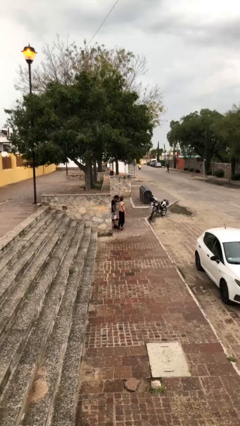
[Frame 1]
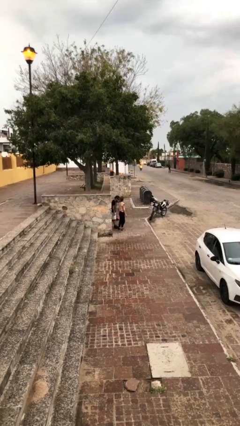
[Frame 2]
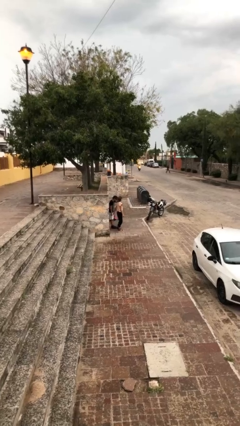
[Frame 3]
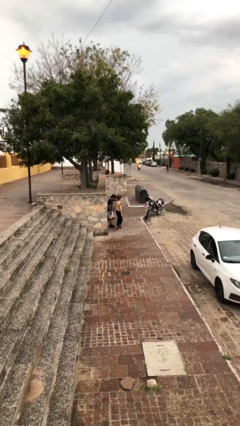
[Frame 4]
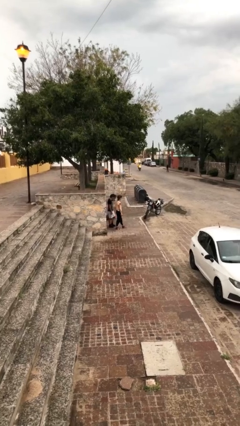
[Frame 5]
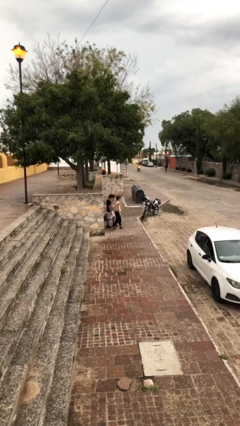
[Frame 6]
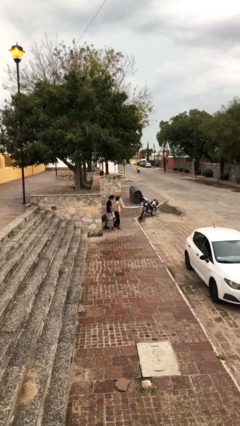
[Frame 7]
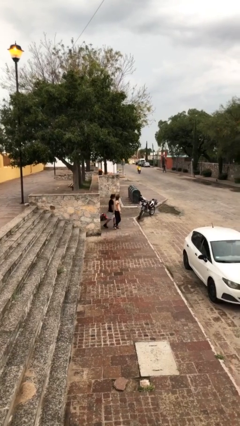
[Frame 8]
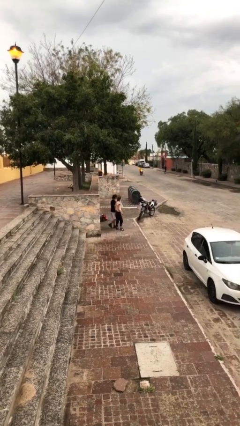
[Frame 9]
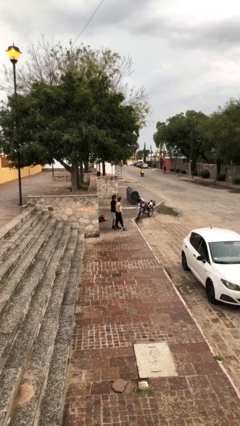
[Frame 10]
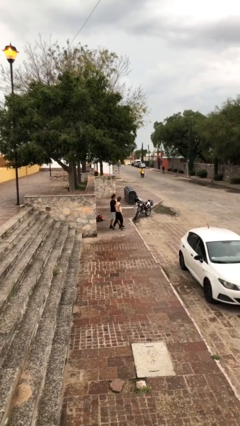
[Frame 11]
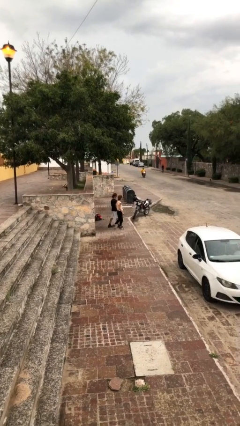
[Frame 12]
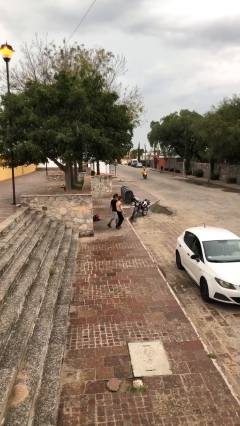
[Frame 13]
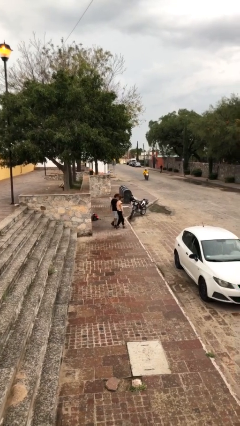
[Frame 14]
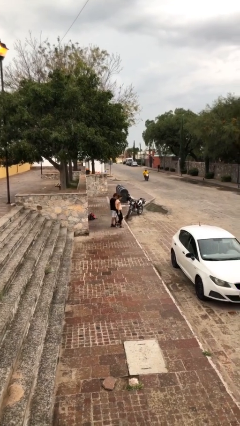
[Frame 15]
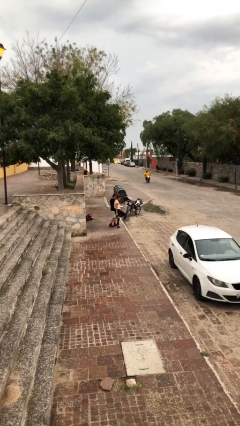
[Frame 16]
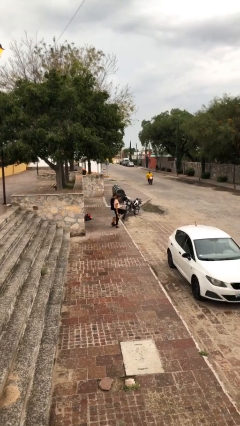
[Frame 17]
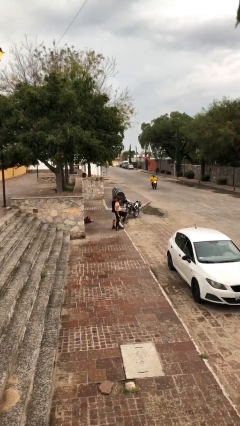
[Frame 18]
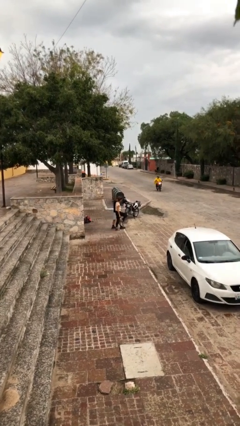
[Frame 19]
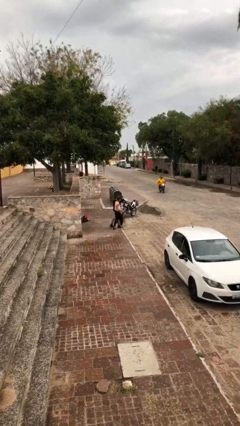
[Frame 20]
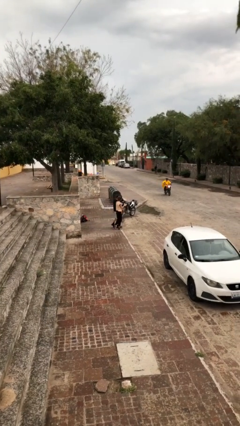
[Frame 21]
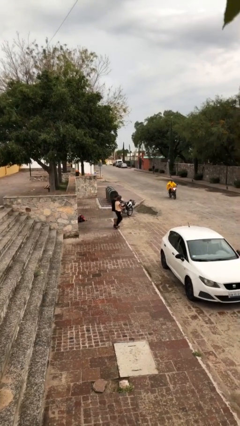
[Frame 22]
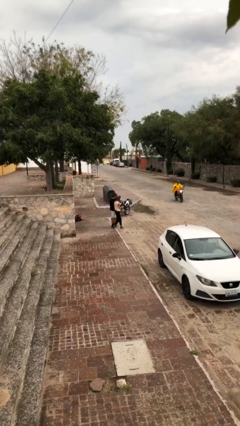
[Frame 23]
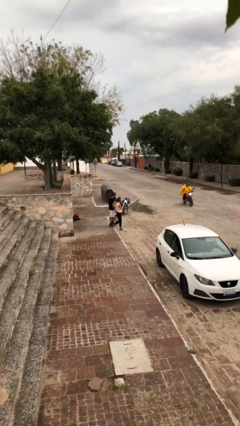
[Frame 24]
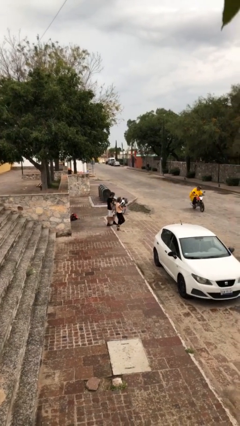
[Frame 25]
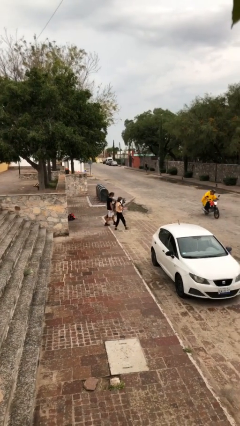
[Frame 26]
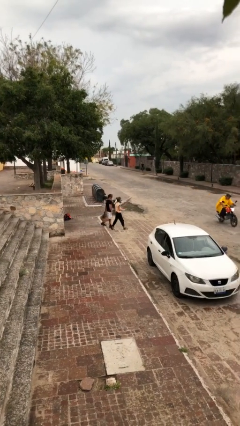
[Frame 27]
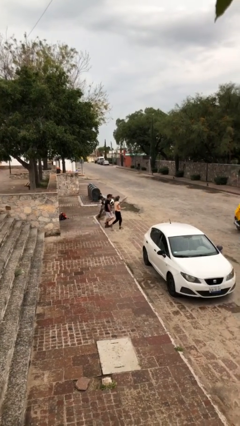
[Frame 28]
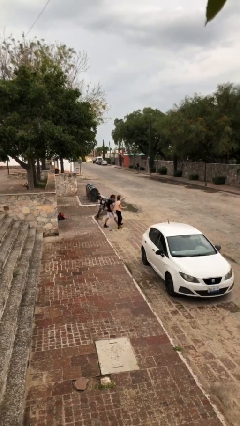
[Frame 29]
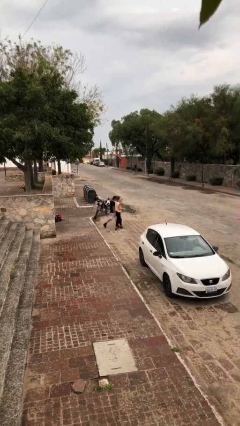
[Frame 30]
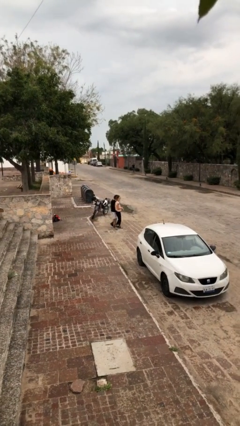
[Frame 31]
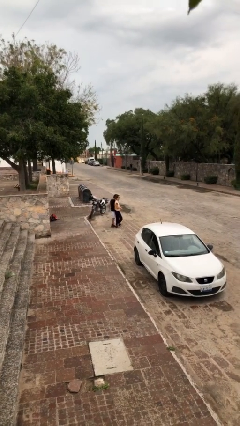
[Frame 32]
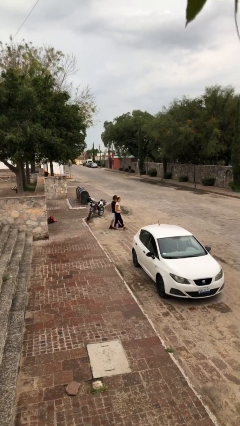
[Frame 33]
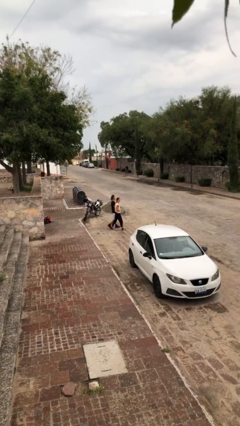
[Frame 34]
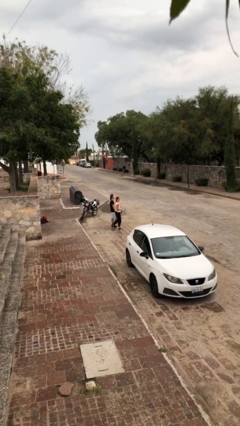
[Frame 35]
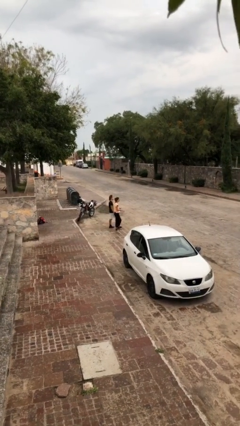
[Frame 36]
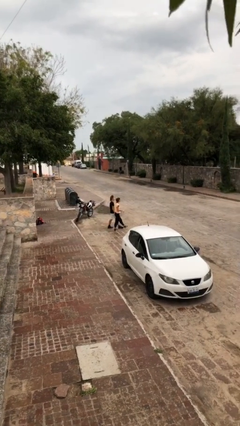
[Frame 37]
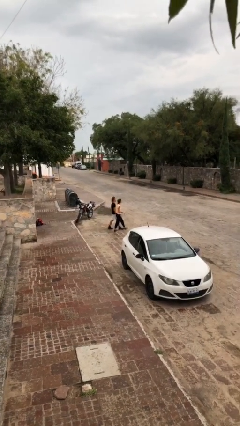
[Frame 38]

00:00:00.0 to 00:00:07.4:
person talks to person

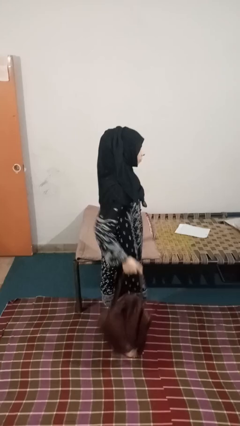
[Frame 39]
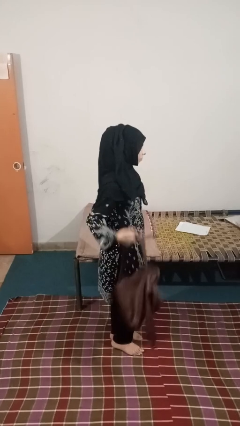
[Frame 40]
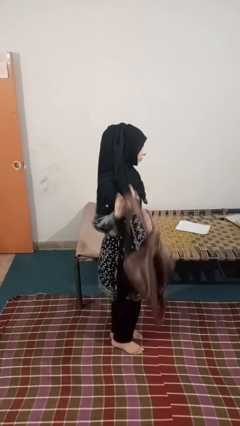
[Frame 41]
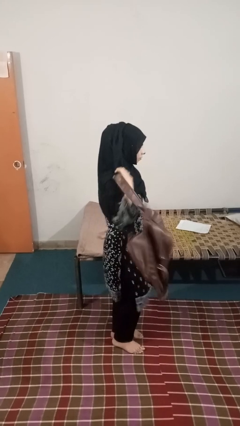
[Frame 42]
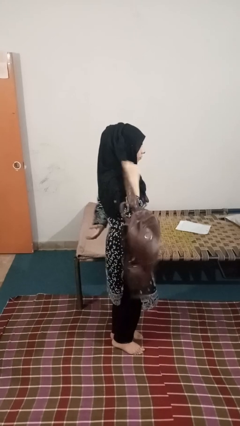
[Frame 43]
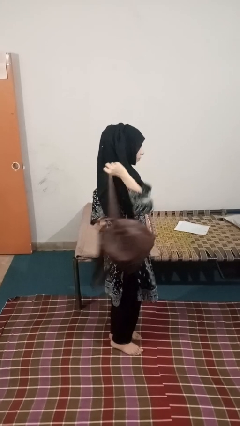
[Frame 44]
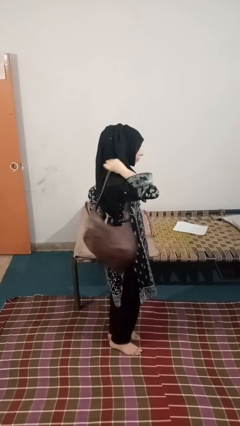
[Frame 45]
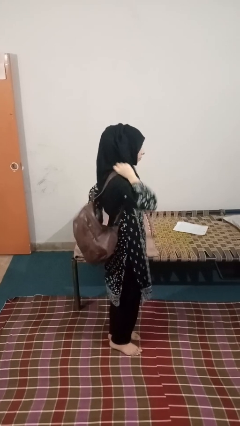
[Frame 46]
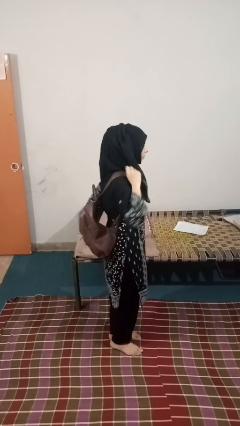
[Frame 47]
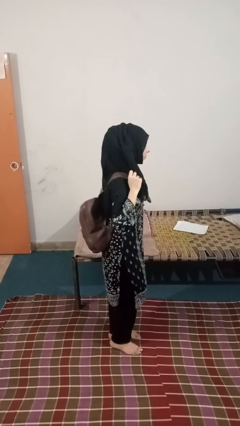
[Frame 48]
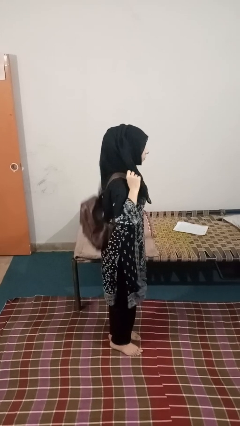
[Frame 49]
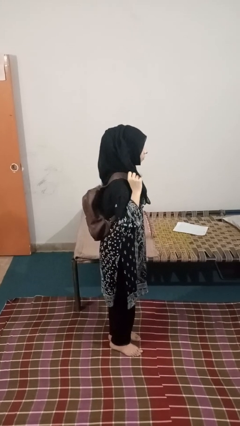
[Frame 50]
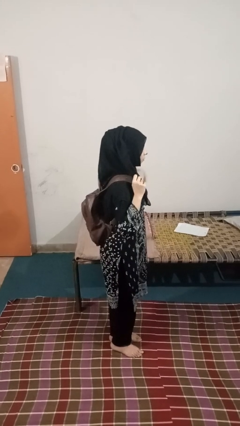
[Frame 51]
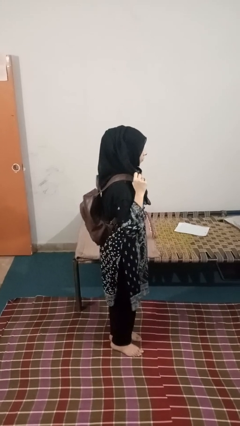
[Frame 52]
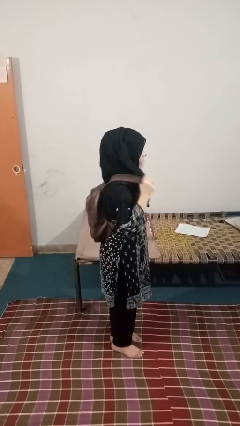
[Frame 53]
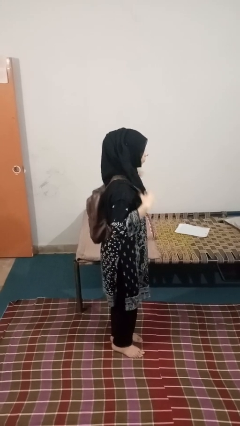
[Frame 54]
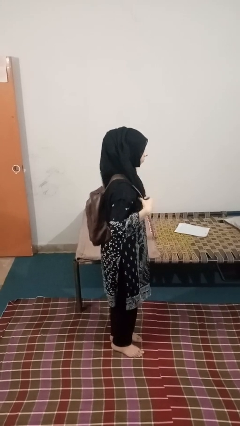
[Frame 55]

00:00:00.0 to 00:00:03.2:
person puts on backpack

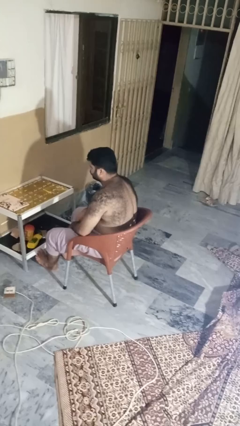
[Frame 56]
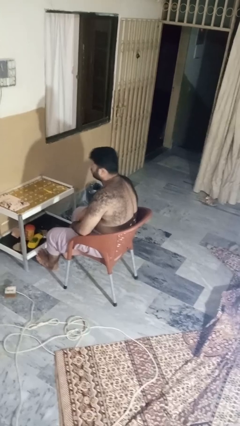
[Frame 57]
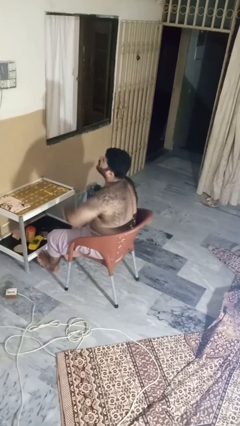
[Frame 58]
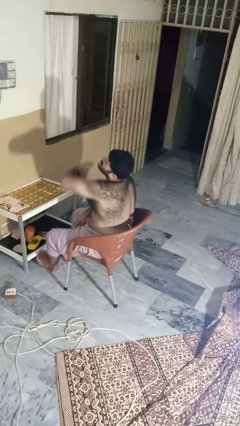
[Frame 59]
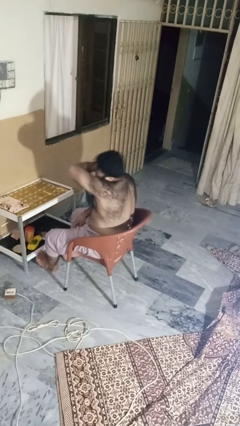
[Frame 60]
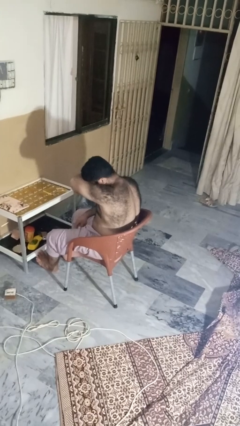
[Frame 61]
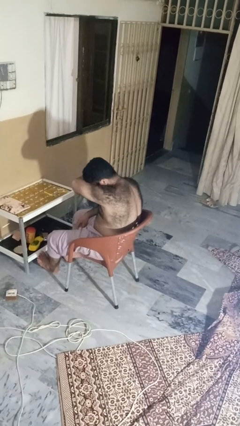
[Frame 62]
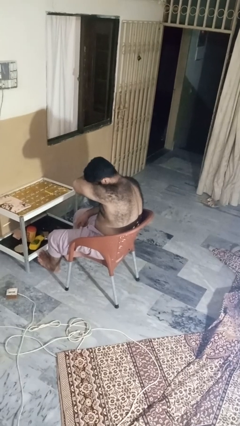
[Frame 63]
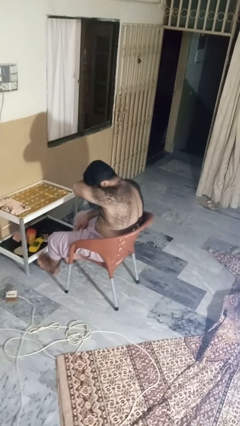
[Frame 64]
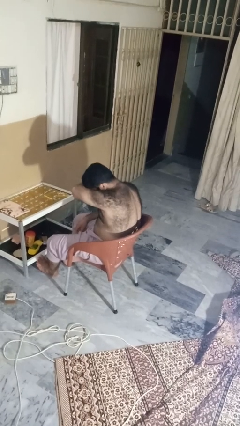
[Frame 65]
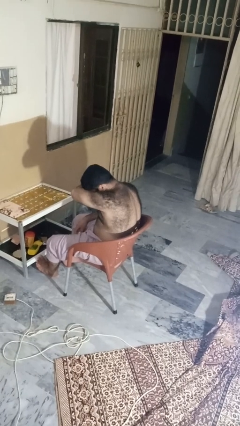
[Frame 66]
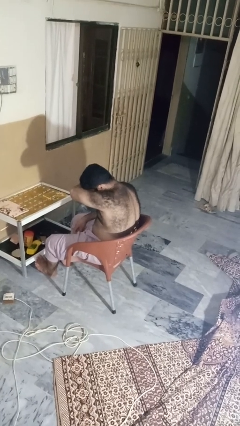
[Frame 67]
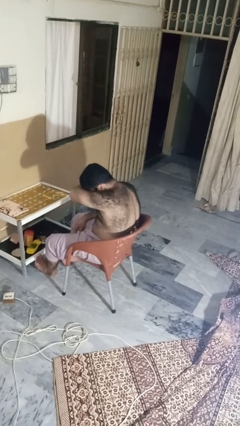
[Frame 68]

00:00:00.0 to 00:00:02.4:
person sneezes into arm

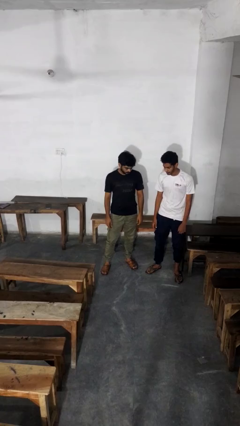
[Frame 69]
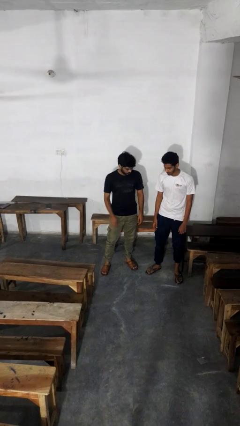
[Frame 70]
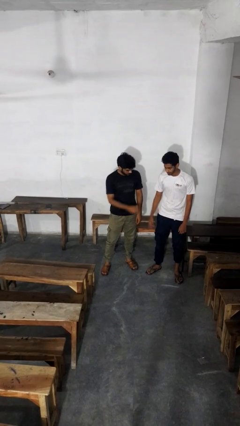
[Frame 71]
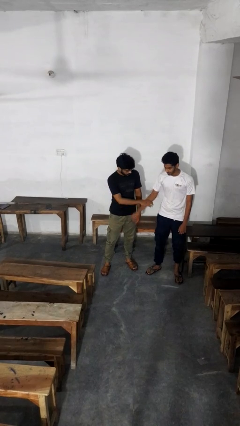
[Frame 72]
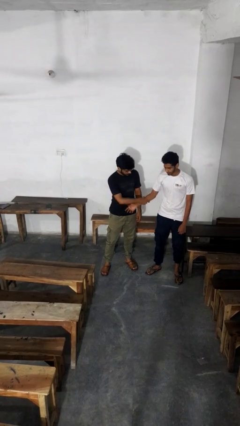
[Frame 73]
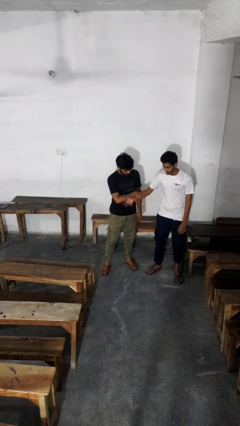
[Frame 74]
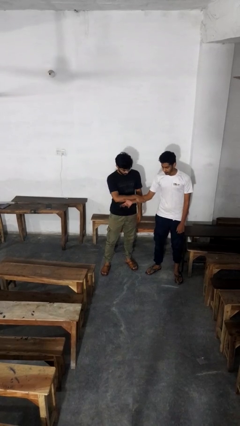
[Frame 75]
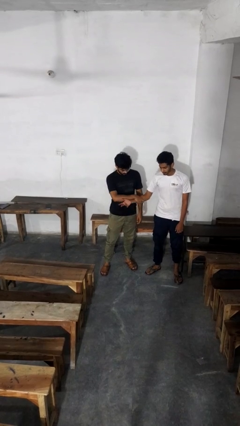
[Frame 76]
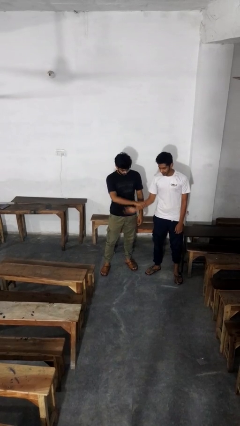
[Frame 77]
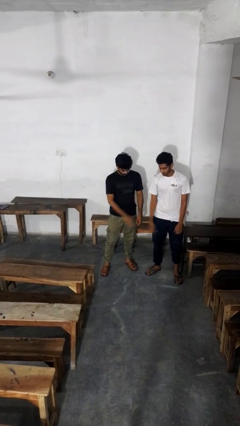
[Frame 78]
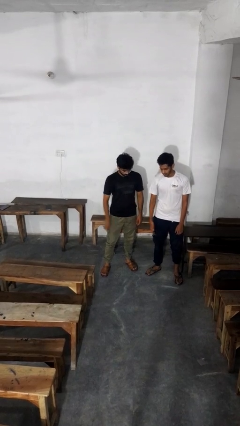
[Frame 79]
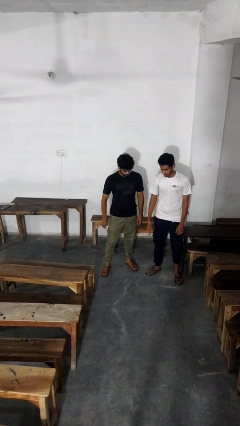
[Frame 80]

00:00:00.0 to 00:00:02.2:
person grabs person by forearm

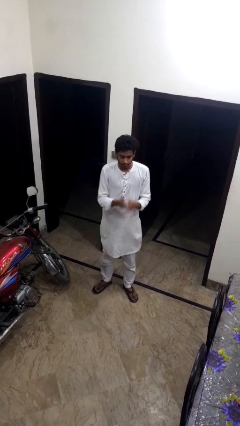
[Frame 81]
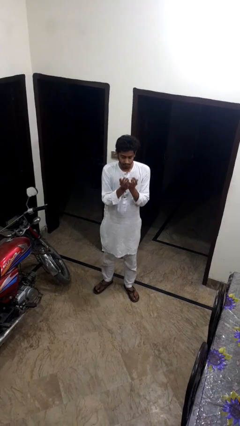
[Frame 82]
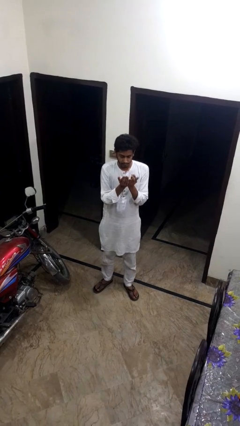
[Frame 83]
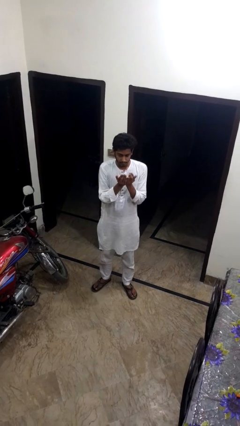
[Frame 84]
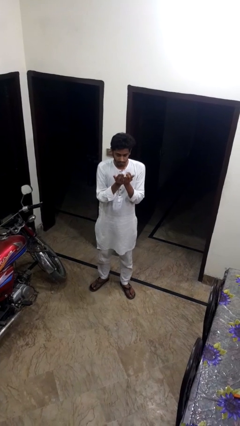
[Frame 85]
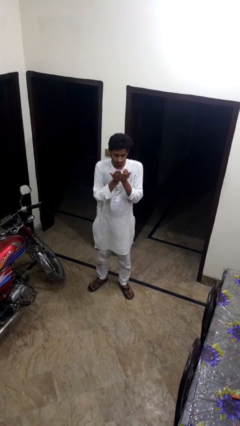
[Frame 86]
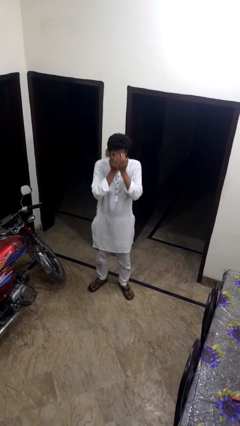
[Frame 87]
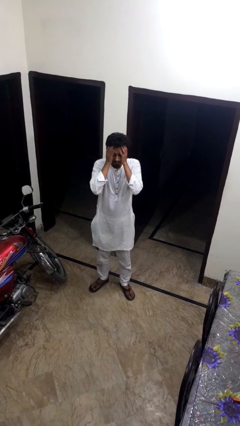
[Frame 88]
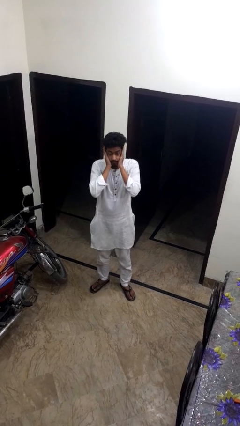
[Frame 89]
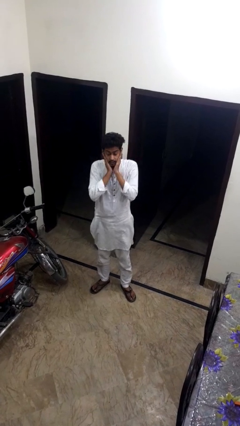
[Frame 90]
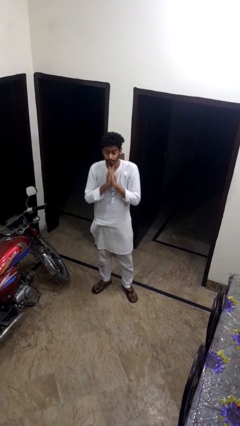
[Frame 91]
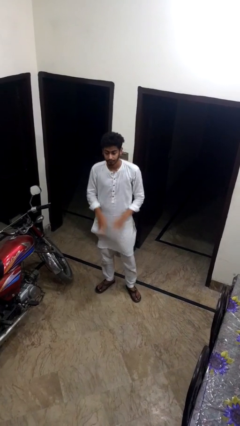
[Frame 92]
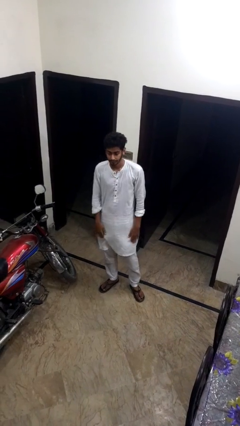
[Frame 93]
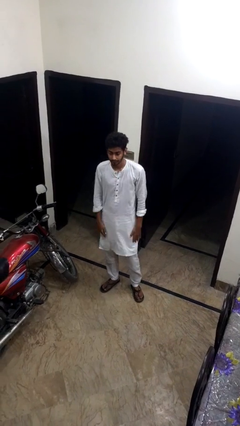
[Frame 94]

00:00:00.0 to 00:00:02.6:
person prays
